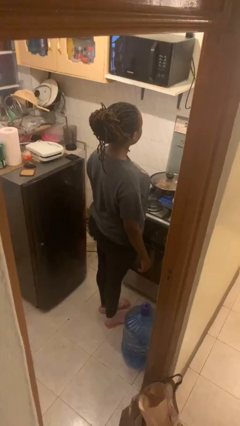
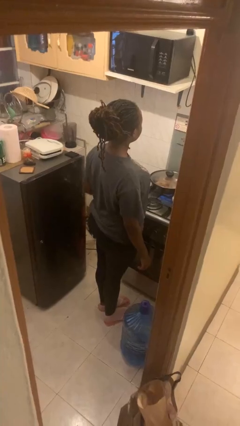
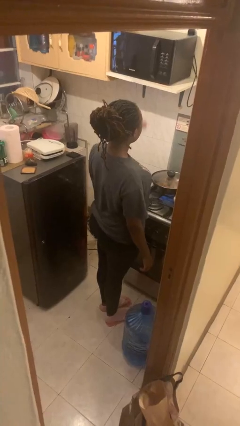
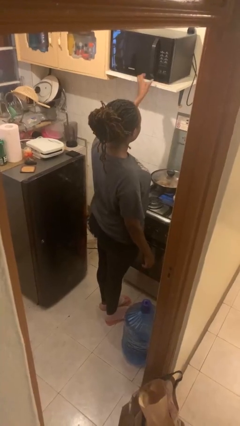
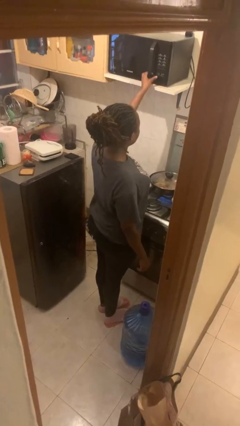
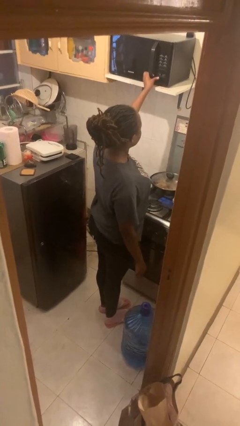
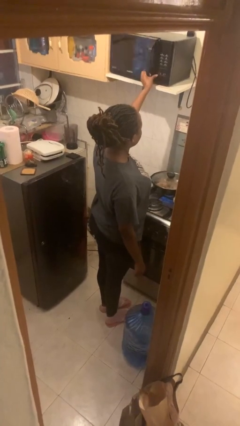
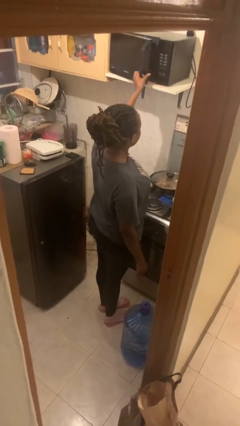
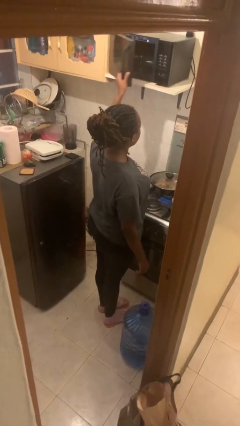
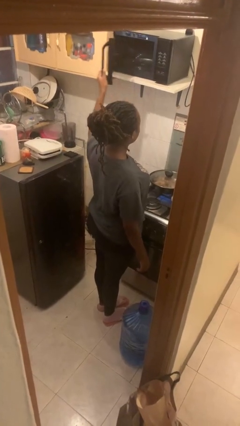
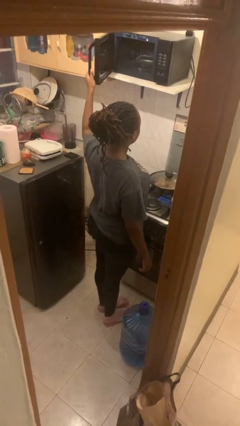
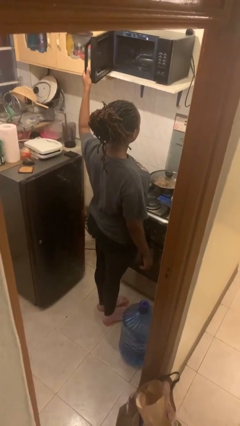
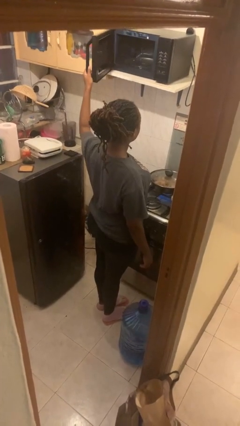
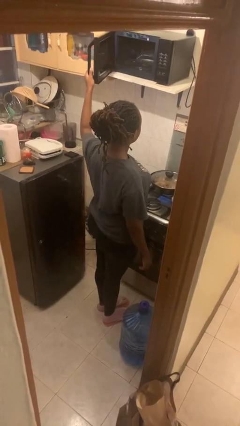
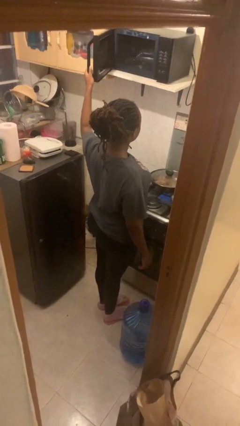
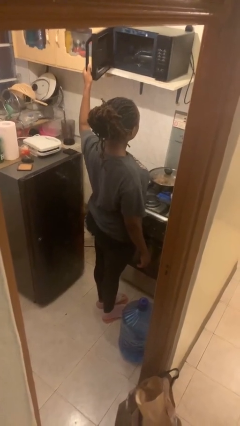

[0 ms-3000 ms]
person opens microwave

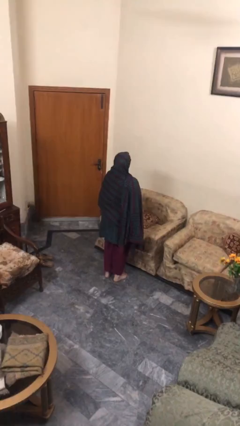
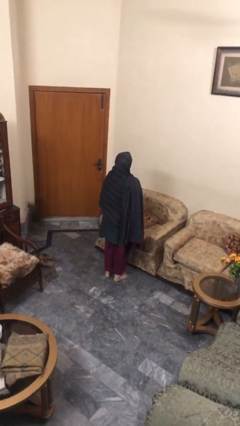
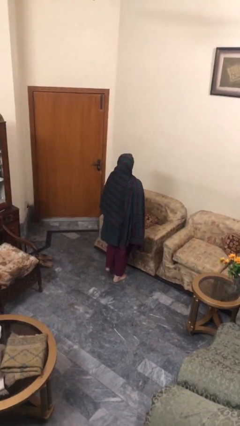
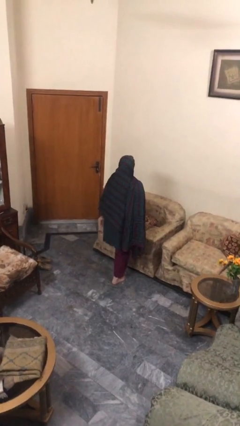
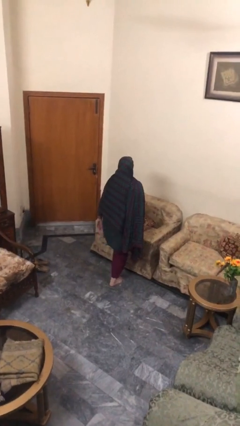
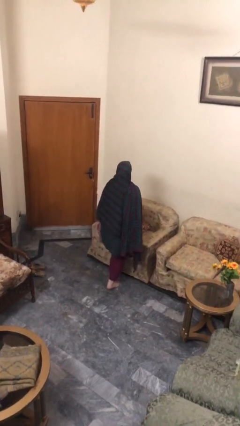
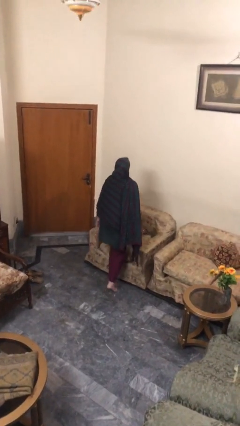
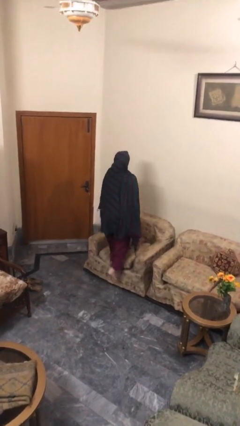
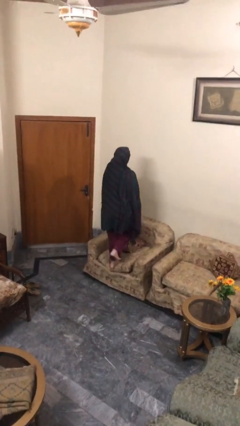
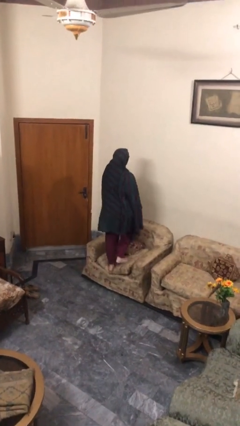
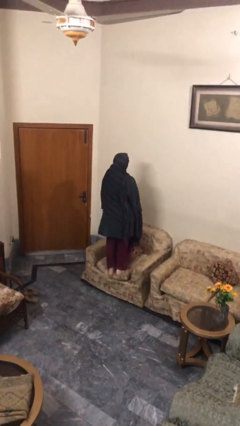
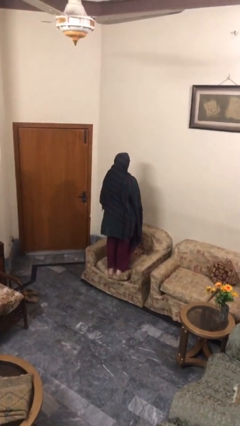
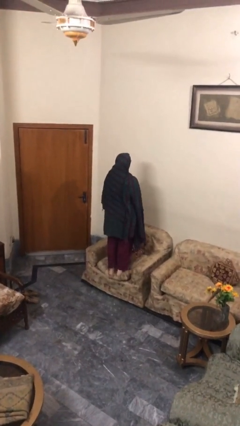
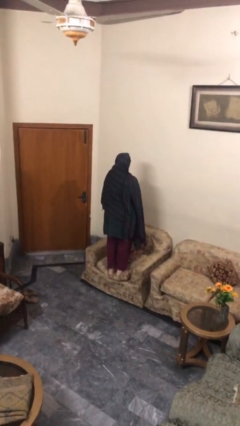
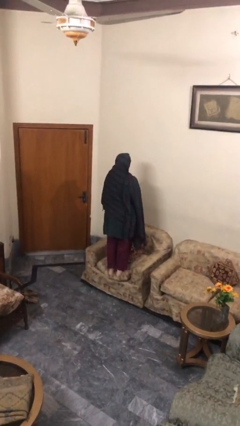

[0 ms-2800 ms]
person climbs on couch

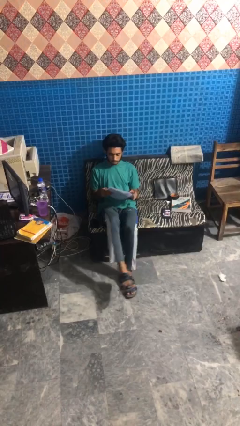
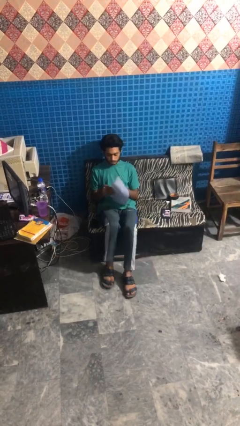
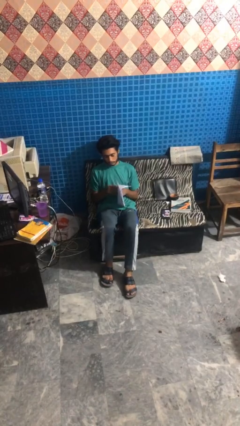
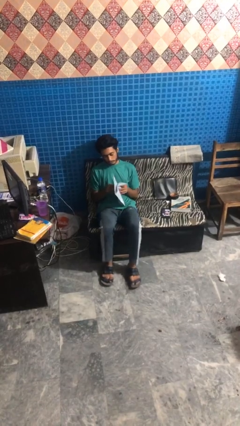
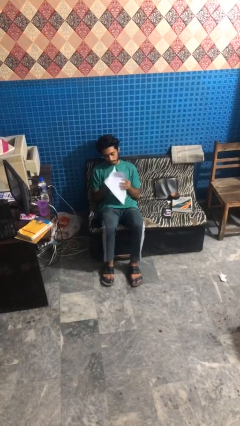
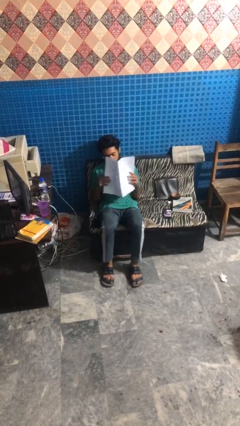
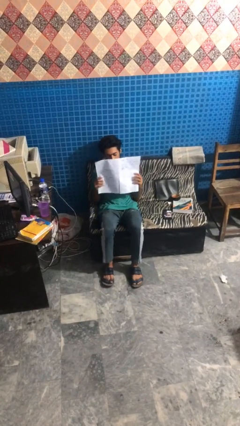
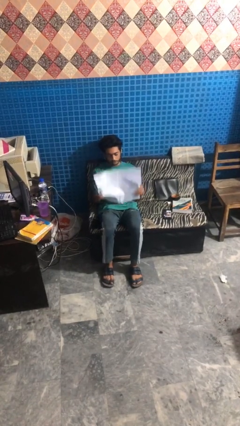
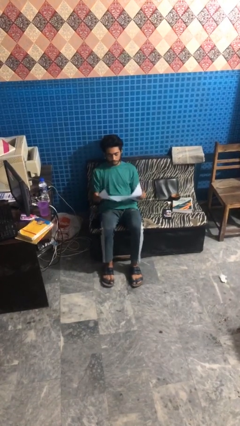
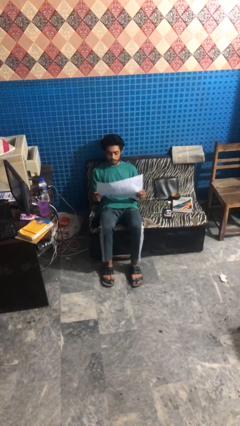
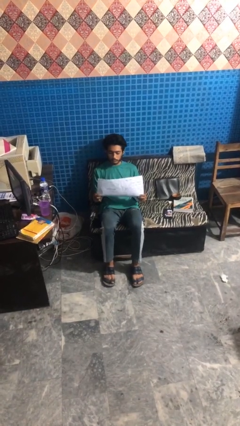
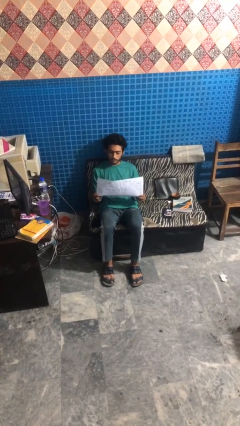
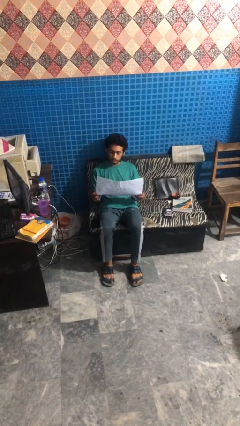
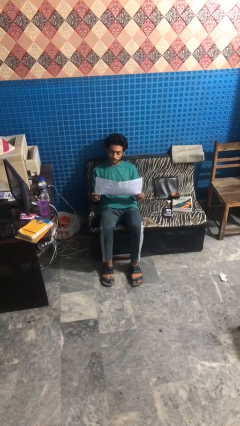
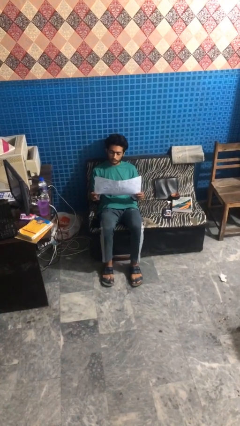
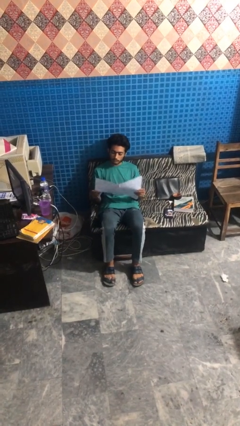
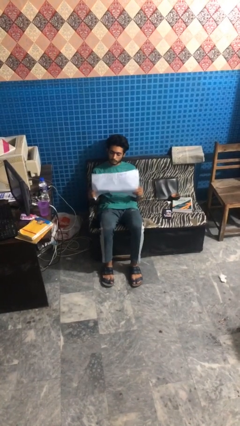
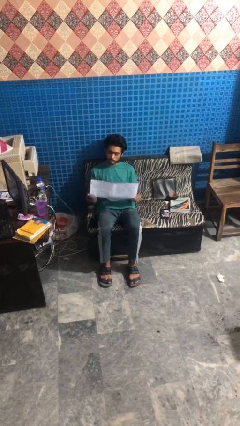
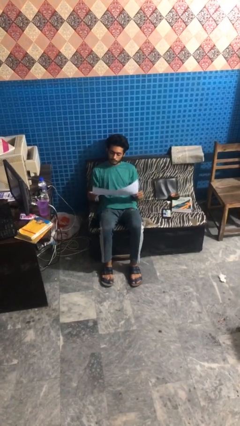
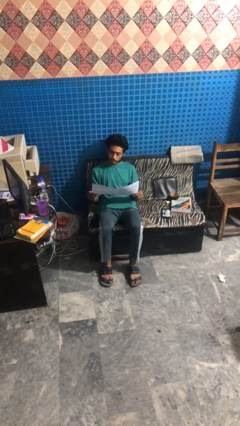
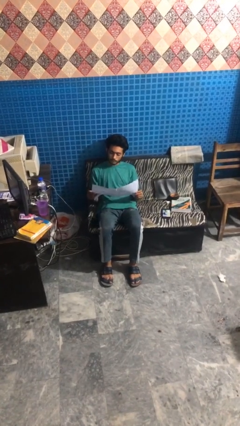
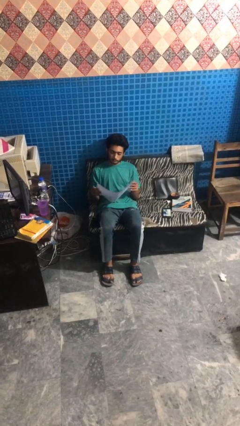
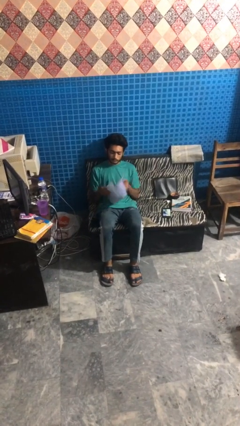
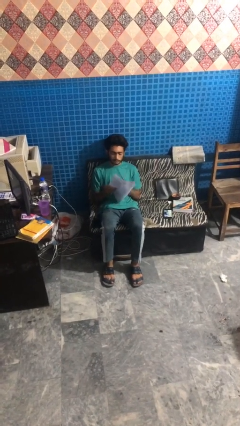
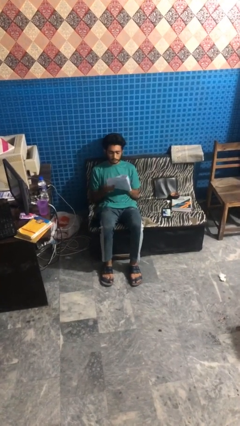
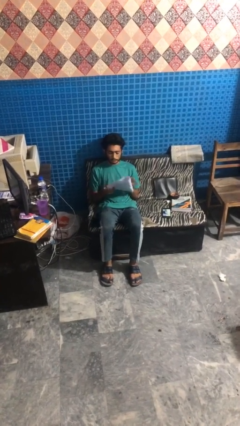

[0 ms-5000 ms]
person reads newspaper

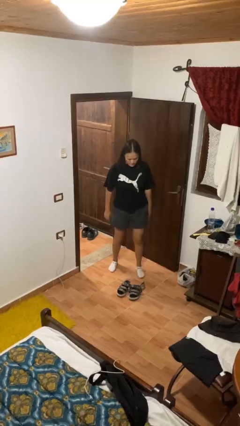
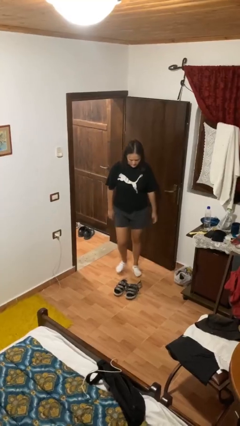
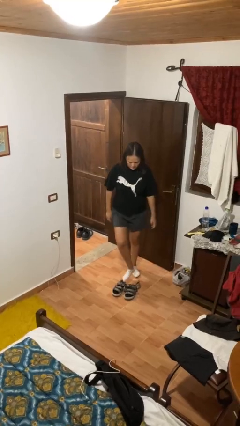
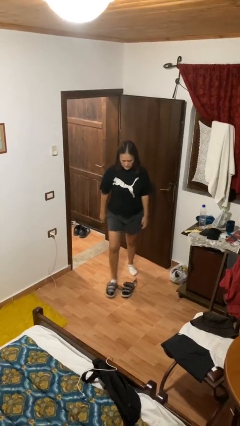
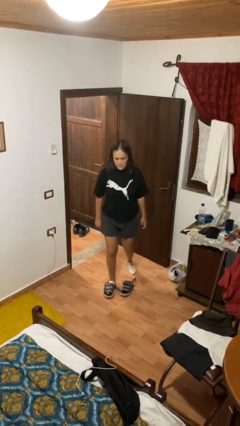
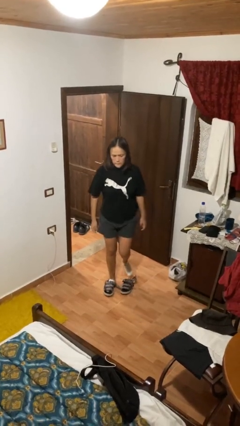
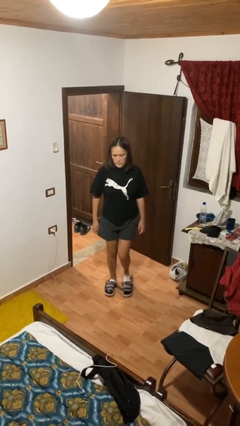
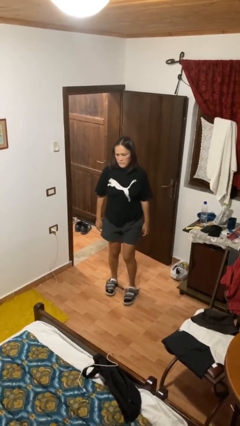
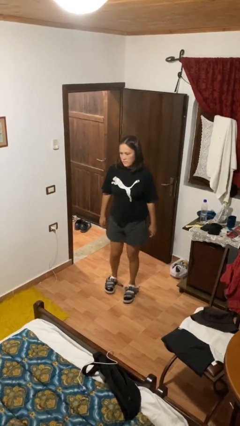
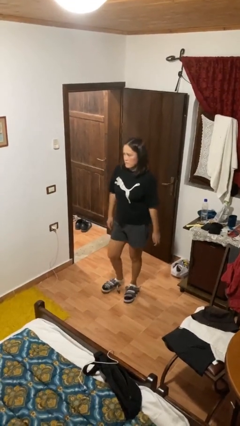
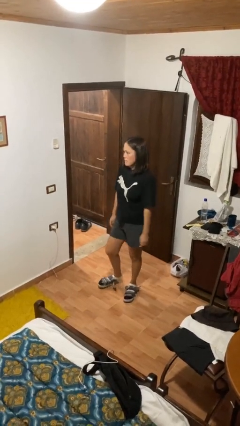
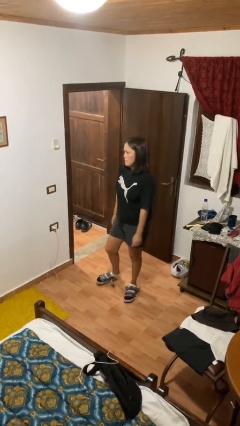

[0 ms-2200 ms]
person puts on shoes

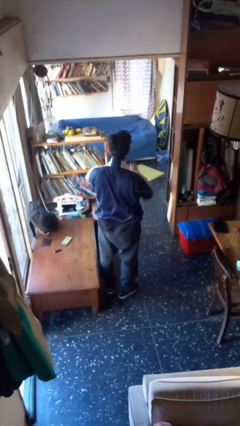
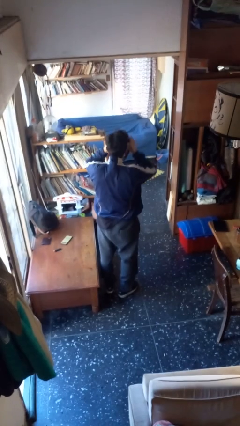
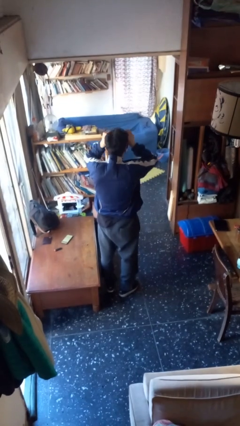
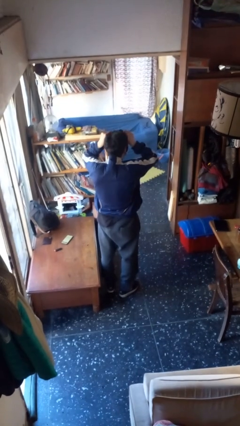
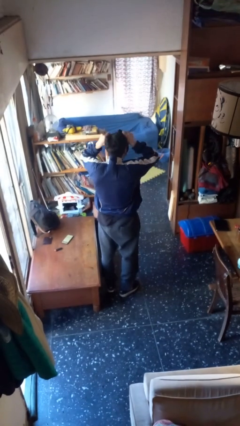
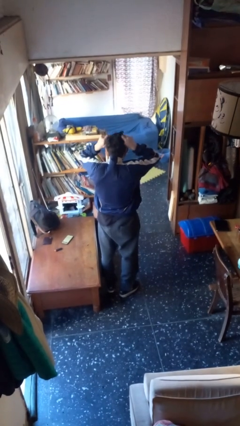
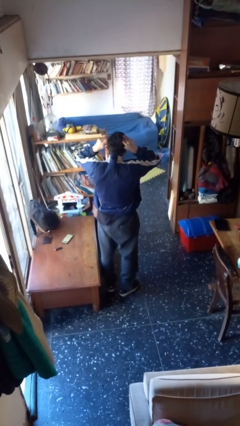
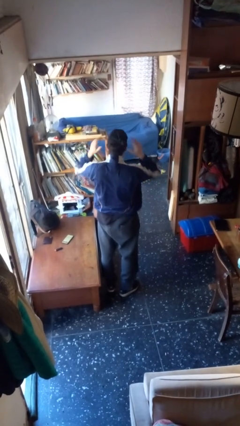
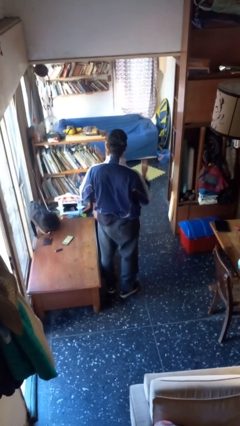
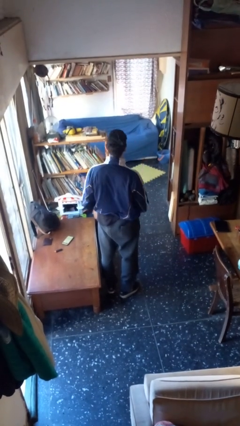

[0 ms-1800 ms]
person puts on facemask

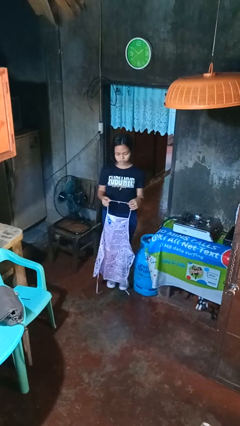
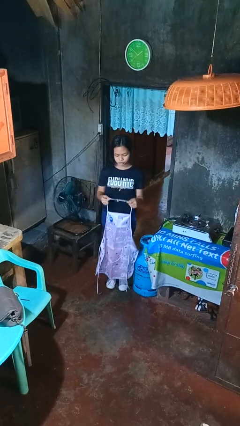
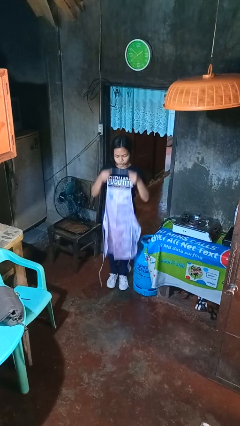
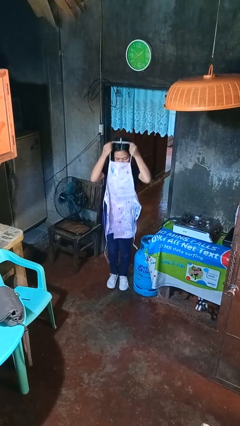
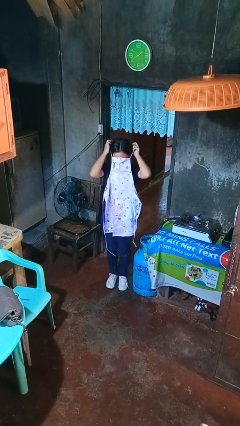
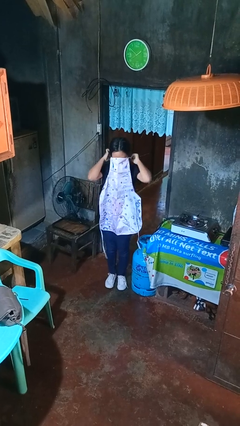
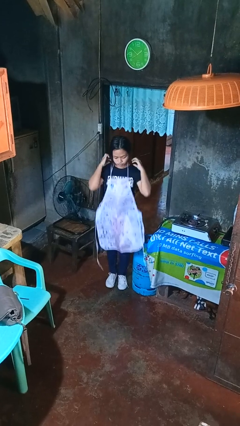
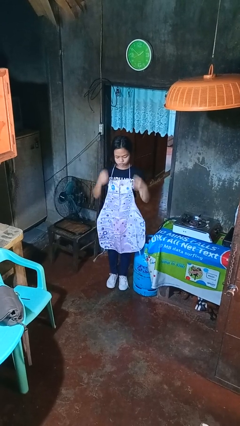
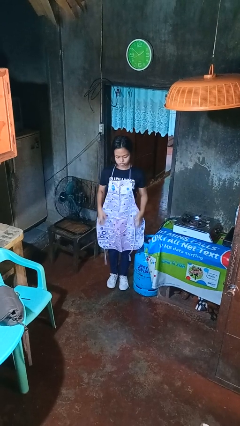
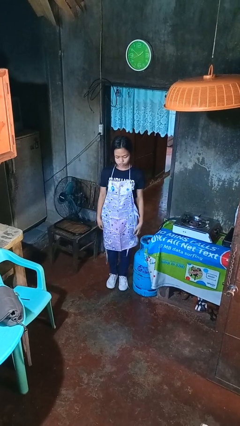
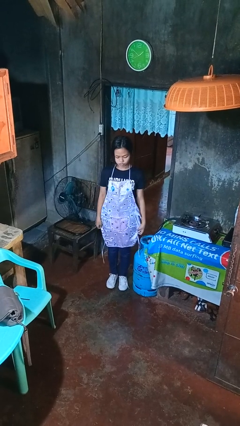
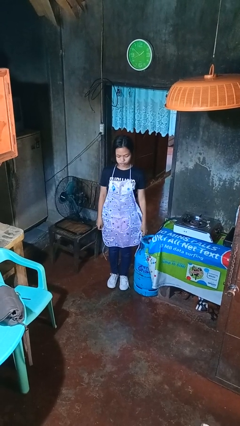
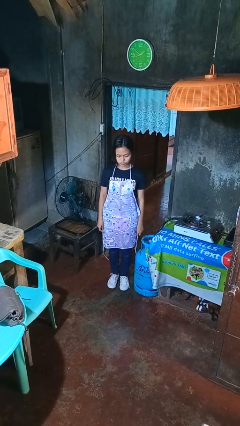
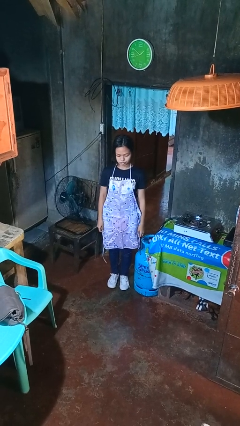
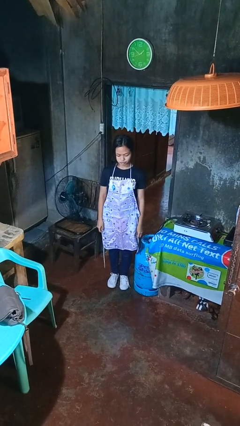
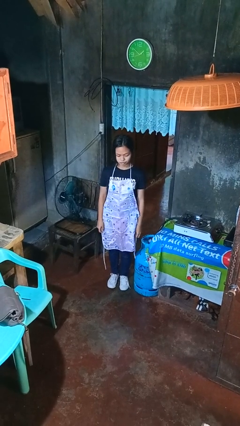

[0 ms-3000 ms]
person puts on apron
